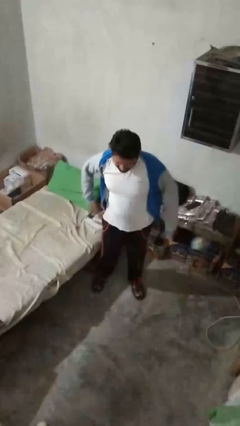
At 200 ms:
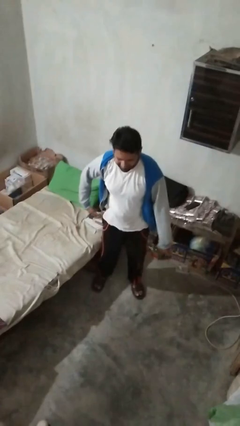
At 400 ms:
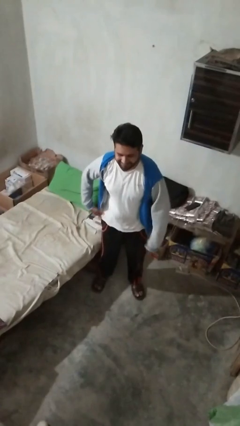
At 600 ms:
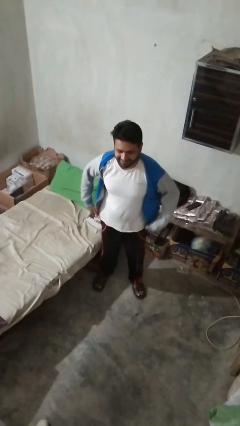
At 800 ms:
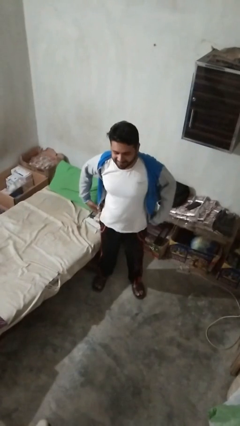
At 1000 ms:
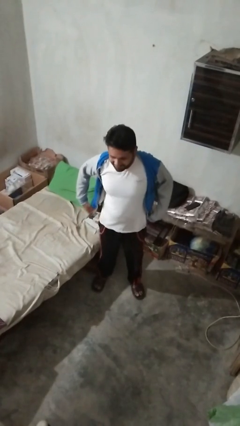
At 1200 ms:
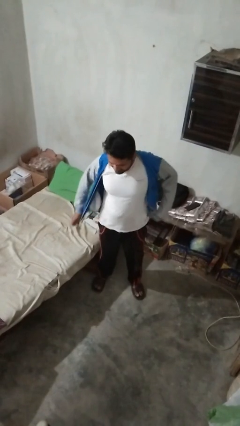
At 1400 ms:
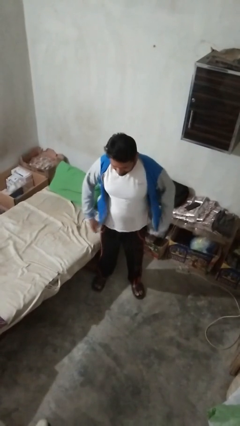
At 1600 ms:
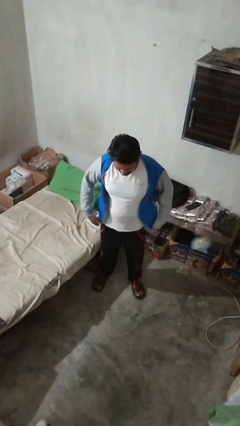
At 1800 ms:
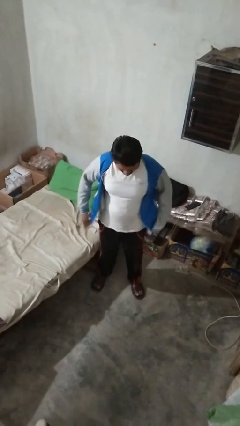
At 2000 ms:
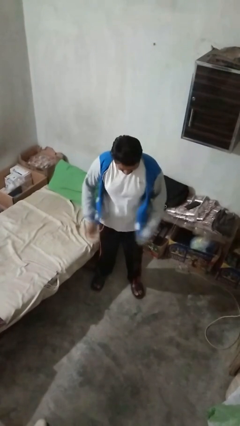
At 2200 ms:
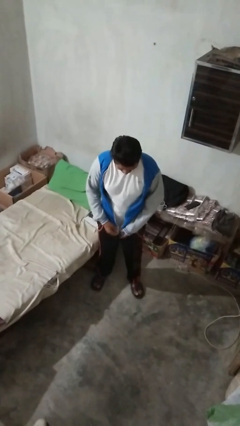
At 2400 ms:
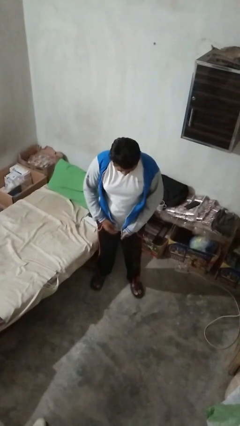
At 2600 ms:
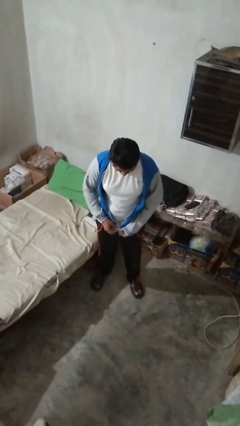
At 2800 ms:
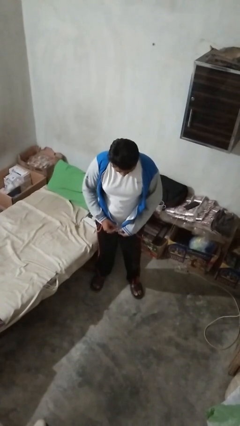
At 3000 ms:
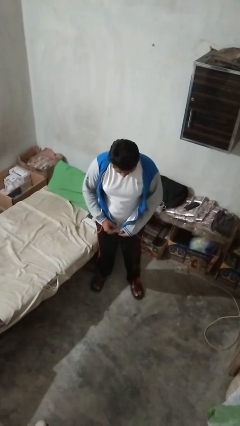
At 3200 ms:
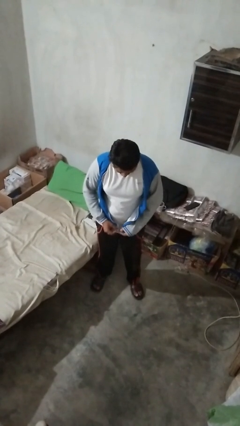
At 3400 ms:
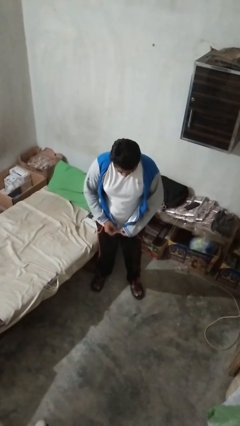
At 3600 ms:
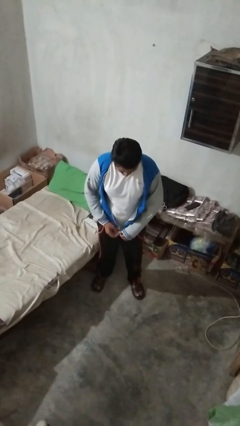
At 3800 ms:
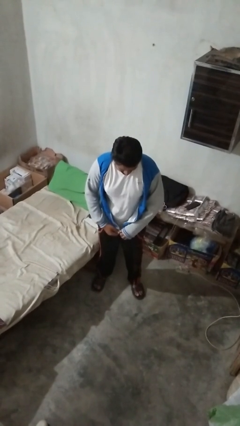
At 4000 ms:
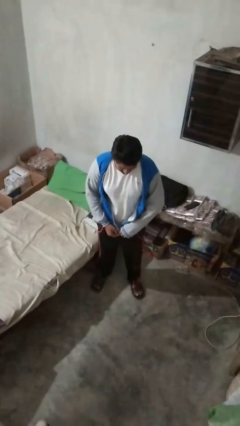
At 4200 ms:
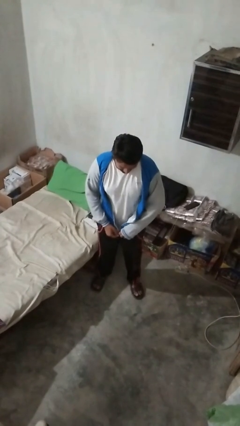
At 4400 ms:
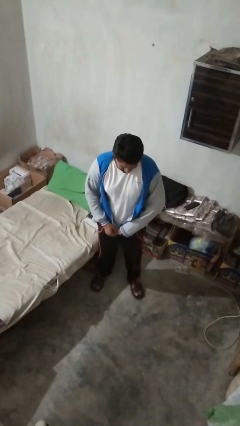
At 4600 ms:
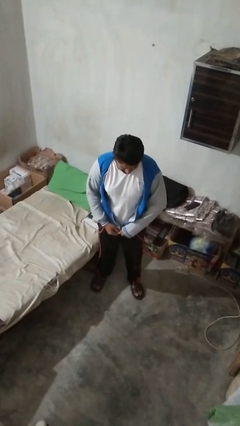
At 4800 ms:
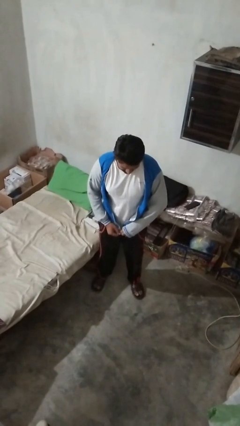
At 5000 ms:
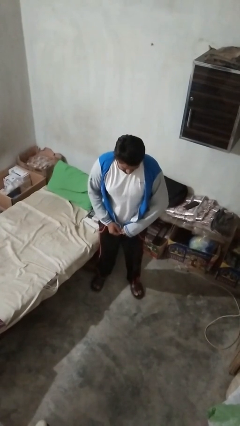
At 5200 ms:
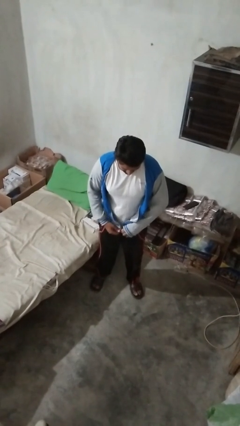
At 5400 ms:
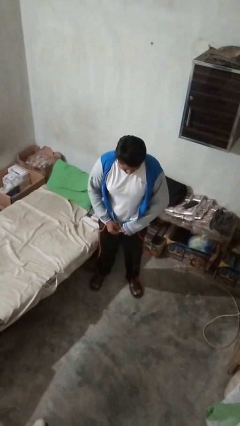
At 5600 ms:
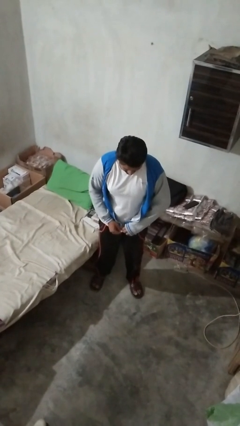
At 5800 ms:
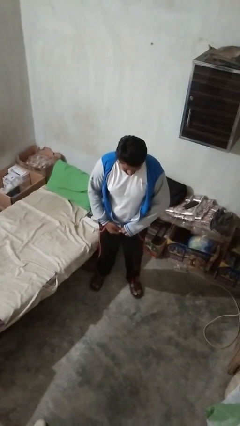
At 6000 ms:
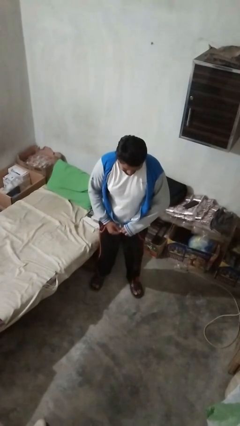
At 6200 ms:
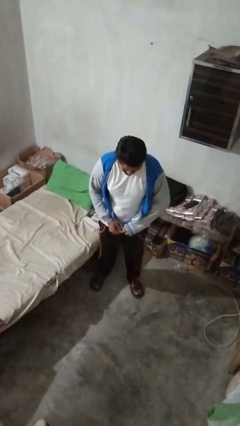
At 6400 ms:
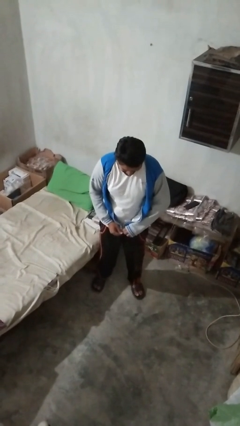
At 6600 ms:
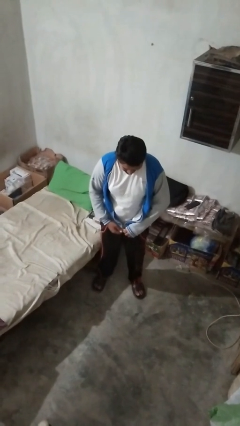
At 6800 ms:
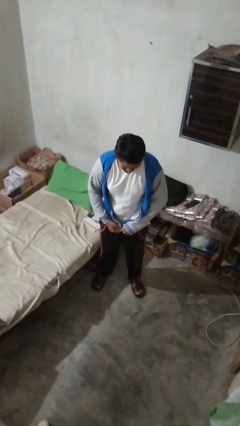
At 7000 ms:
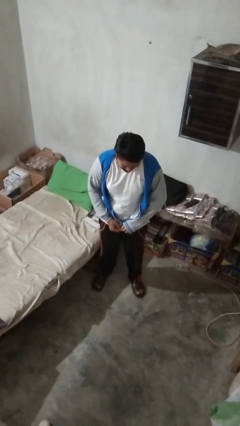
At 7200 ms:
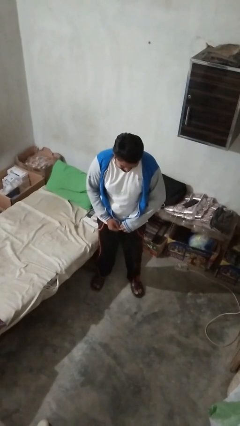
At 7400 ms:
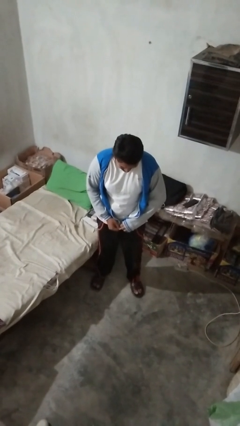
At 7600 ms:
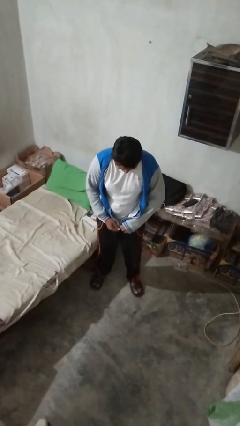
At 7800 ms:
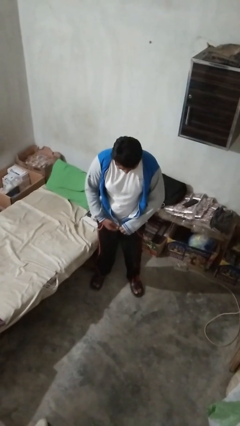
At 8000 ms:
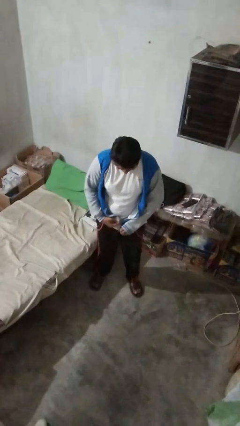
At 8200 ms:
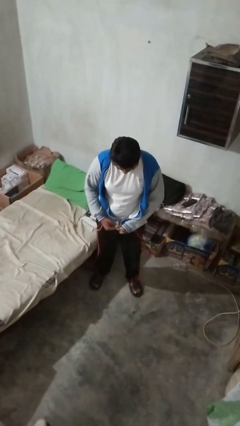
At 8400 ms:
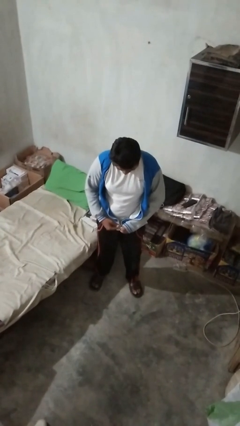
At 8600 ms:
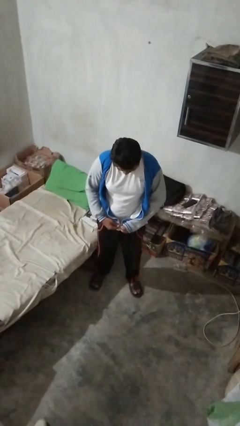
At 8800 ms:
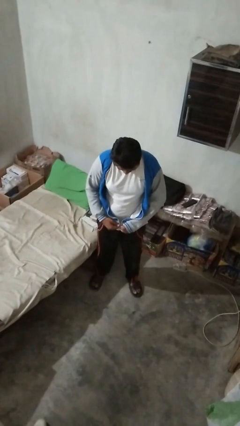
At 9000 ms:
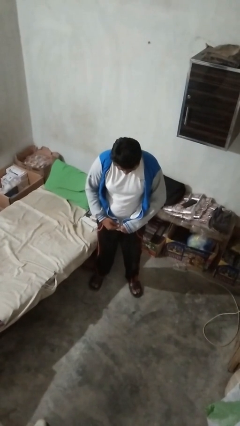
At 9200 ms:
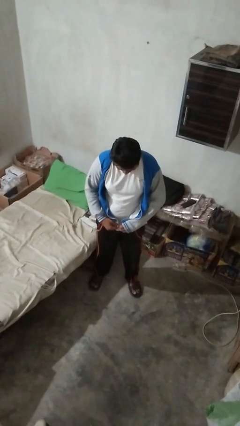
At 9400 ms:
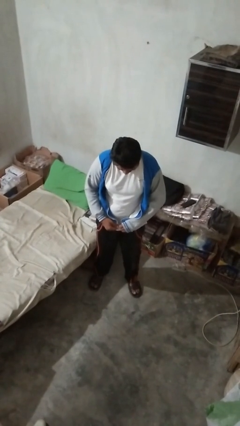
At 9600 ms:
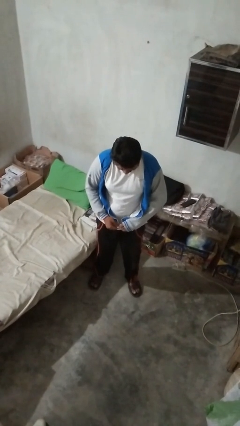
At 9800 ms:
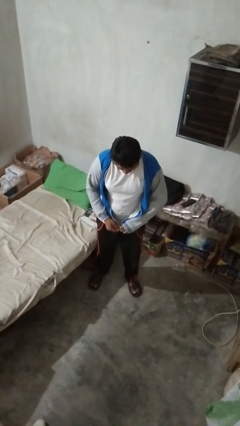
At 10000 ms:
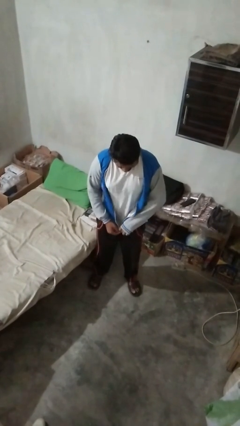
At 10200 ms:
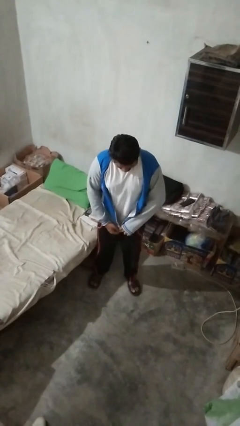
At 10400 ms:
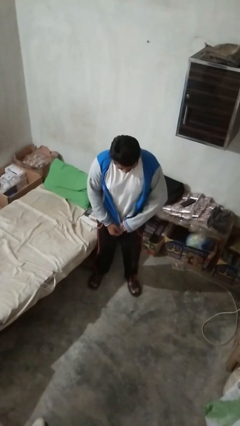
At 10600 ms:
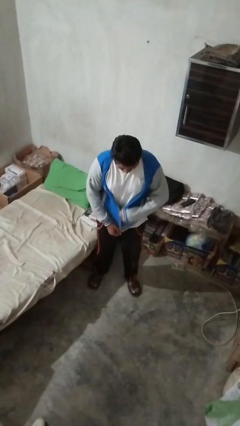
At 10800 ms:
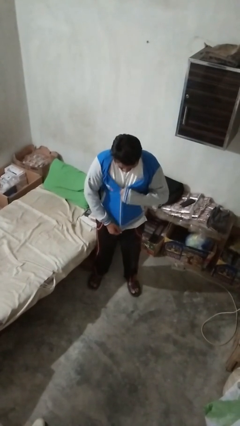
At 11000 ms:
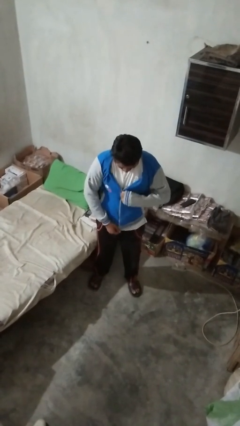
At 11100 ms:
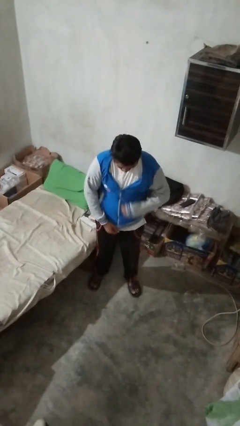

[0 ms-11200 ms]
person zips up jacket

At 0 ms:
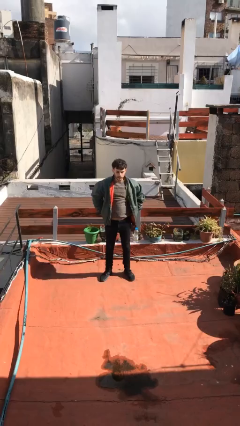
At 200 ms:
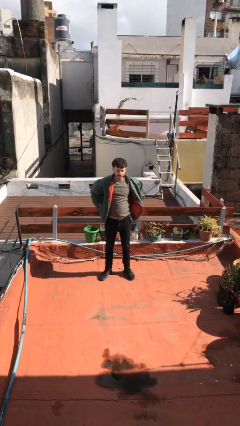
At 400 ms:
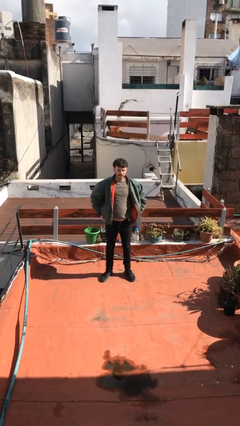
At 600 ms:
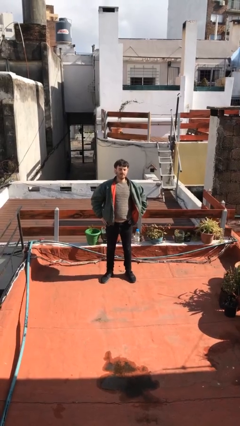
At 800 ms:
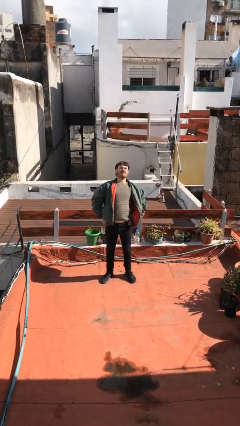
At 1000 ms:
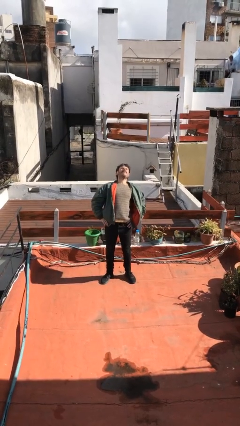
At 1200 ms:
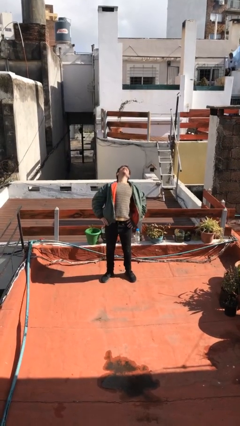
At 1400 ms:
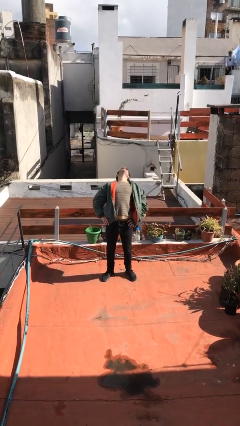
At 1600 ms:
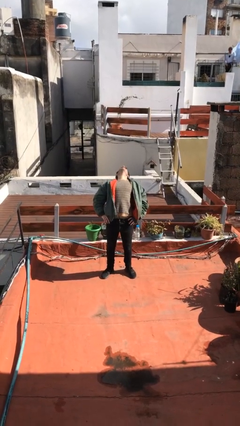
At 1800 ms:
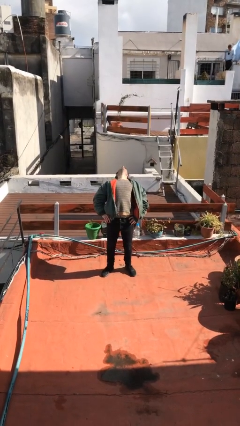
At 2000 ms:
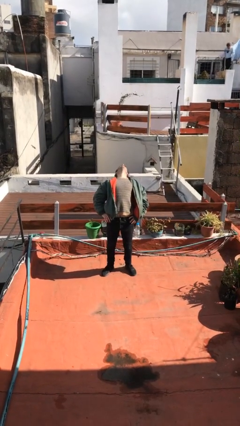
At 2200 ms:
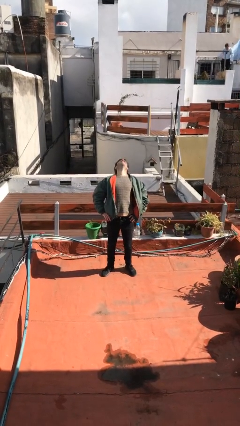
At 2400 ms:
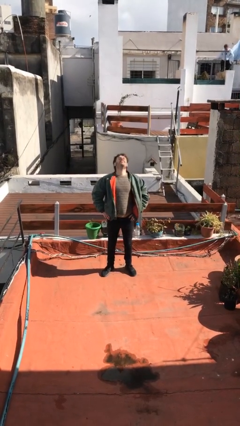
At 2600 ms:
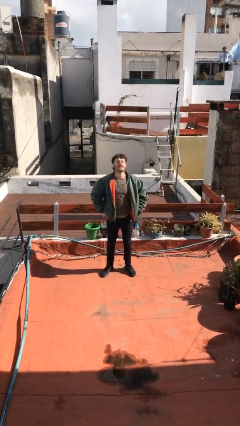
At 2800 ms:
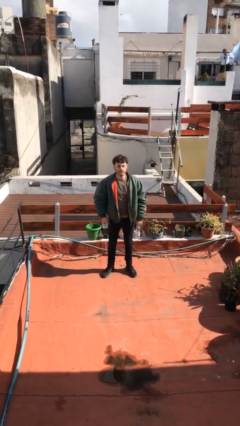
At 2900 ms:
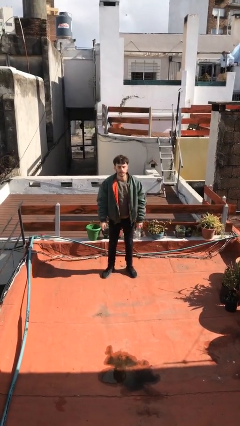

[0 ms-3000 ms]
person stretches back

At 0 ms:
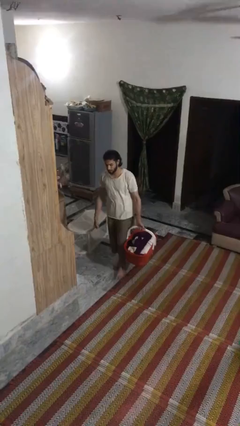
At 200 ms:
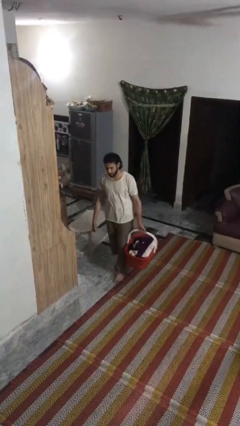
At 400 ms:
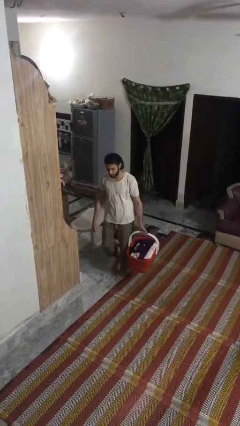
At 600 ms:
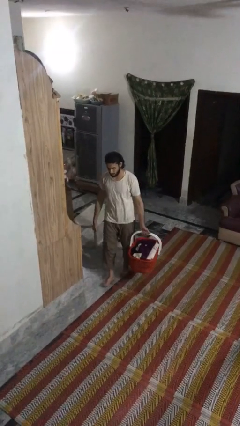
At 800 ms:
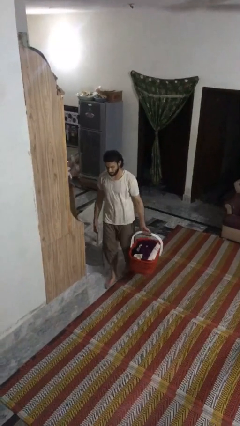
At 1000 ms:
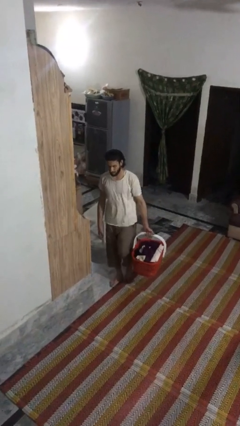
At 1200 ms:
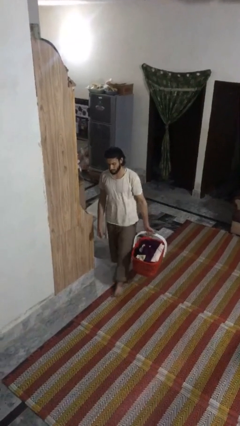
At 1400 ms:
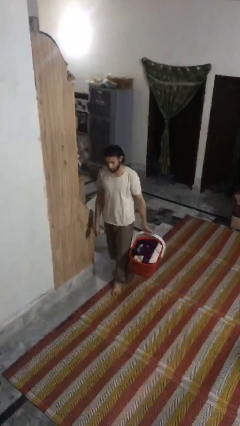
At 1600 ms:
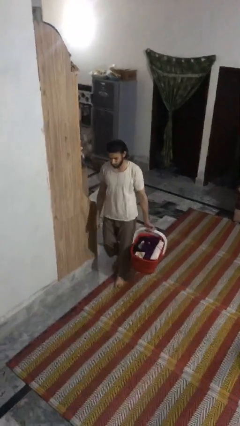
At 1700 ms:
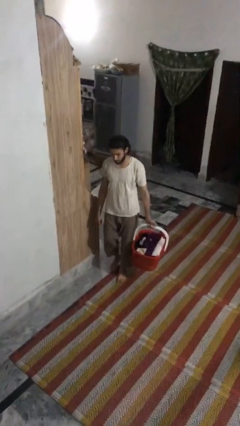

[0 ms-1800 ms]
person carries laundry basket

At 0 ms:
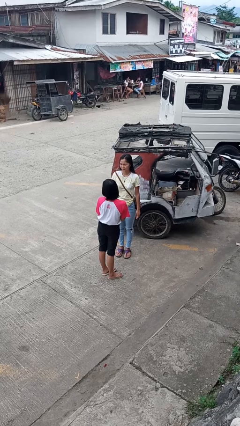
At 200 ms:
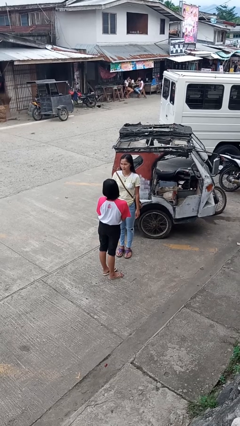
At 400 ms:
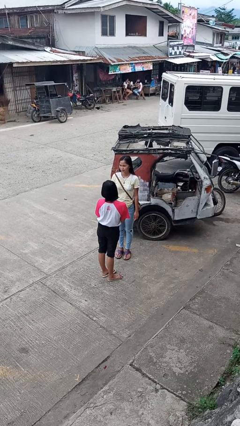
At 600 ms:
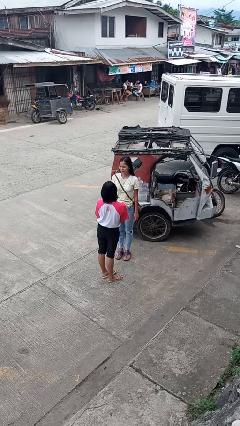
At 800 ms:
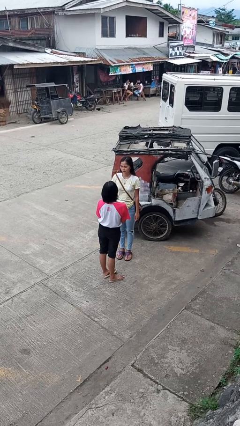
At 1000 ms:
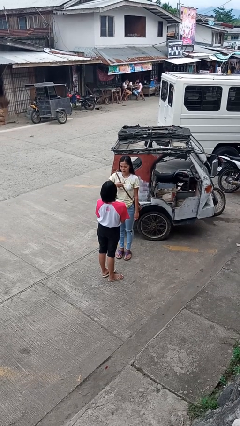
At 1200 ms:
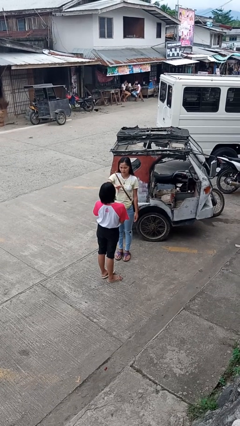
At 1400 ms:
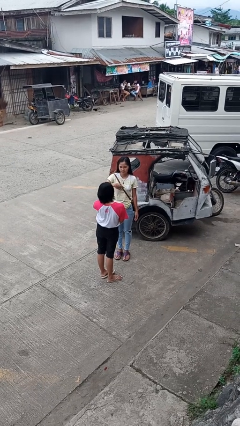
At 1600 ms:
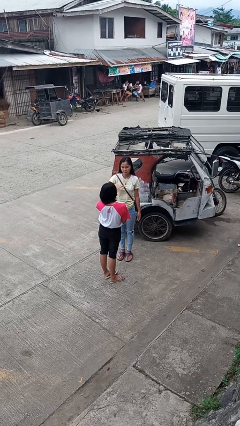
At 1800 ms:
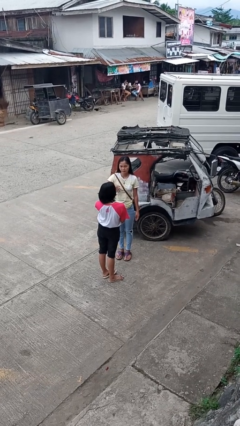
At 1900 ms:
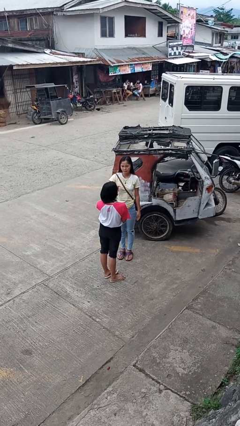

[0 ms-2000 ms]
person shoves person
